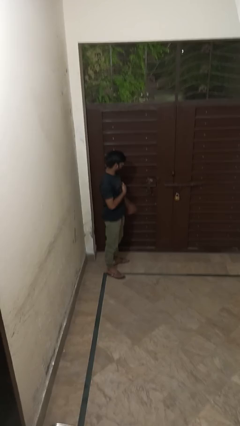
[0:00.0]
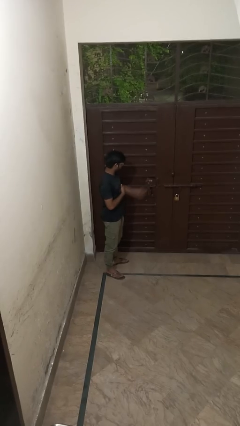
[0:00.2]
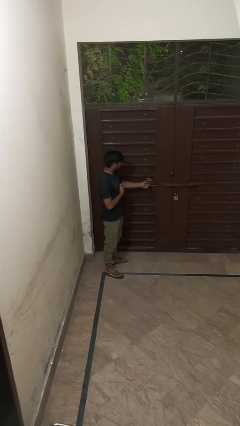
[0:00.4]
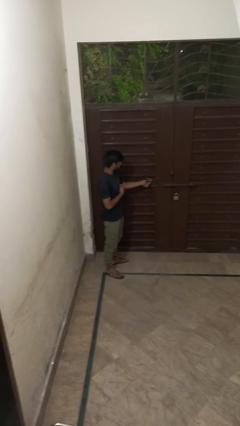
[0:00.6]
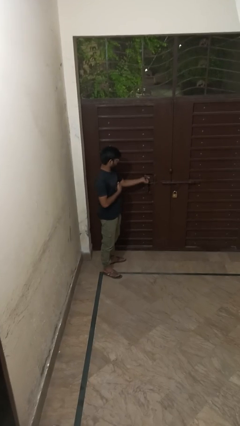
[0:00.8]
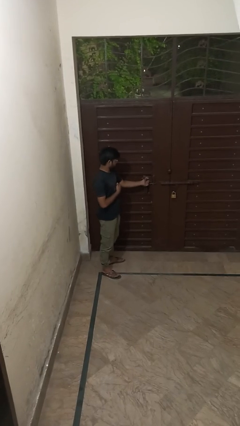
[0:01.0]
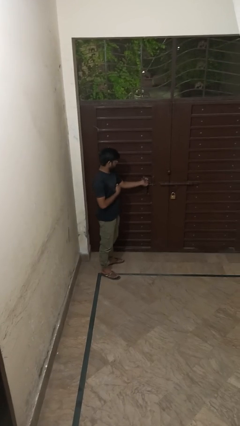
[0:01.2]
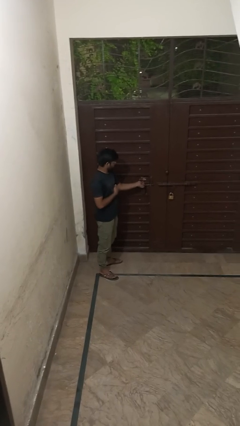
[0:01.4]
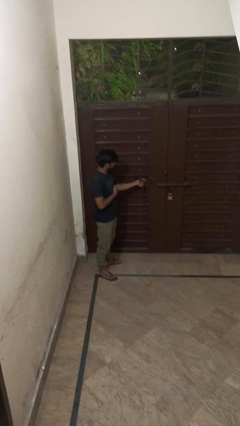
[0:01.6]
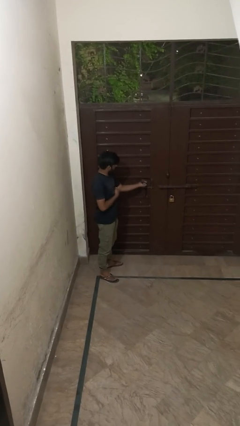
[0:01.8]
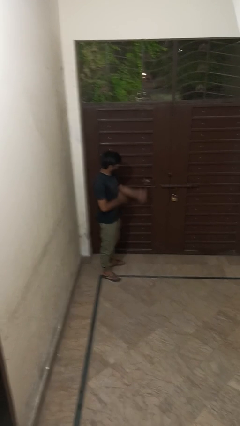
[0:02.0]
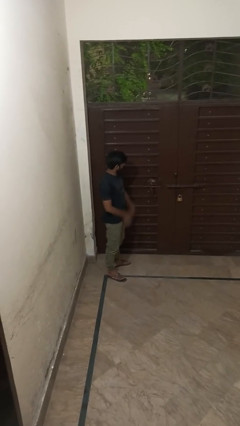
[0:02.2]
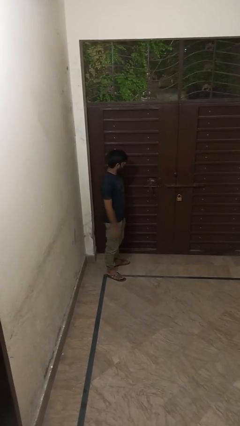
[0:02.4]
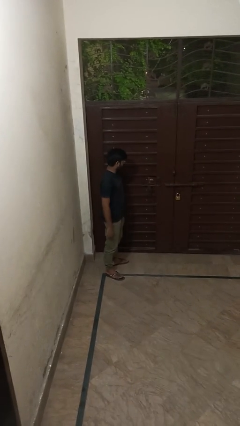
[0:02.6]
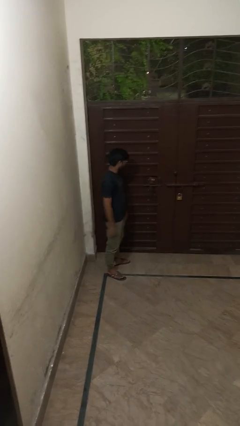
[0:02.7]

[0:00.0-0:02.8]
person unlocks door with keys

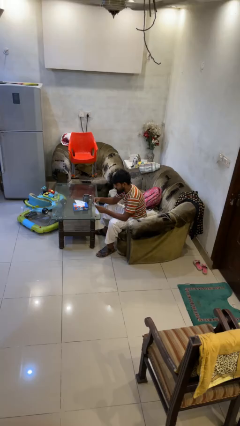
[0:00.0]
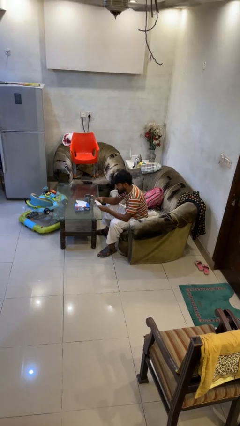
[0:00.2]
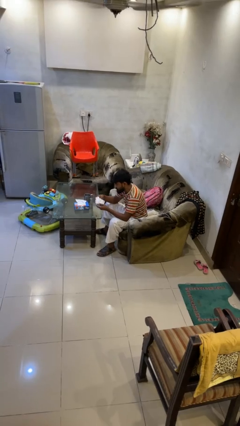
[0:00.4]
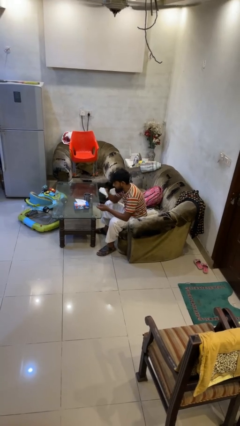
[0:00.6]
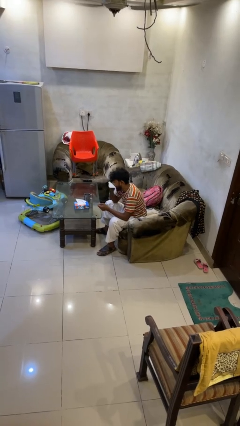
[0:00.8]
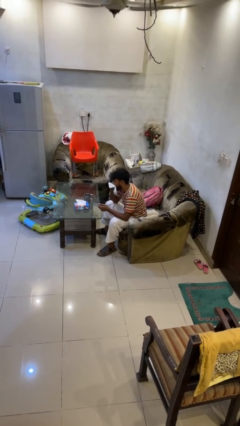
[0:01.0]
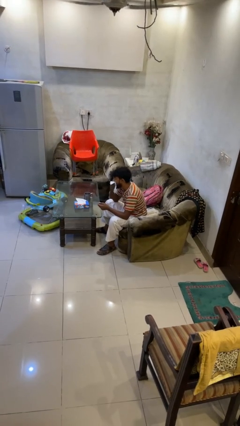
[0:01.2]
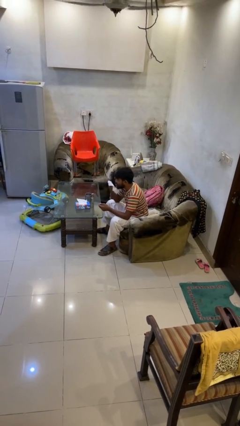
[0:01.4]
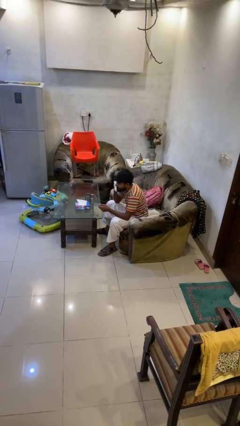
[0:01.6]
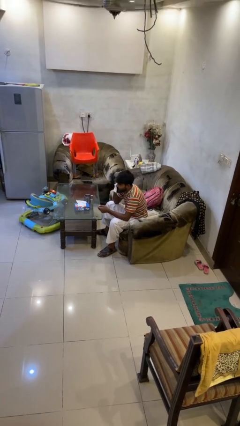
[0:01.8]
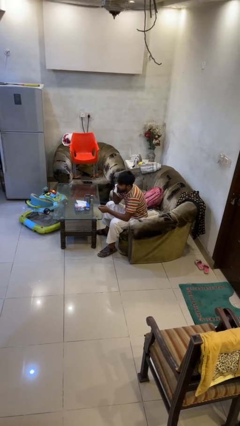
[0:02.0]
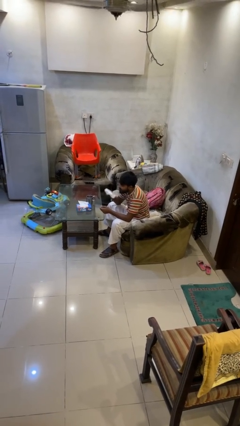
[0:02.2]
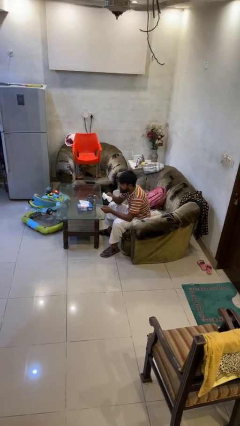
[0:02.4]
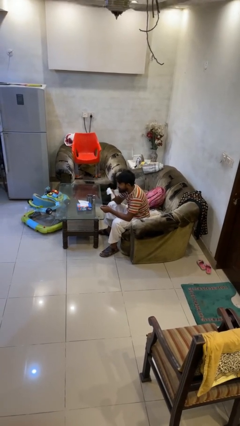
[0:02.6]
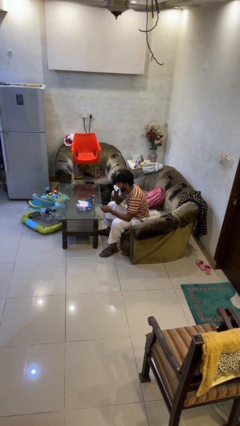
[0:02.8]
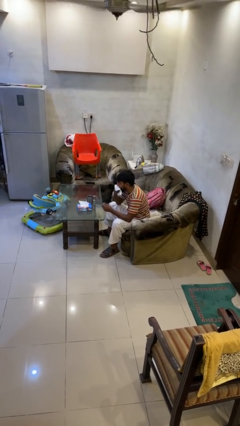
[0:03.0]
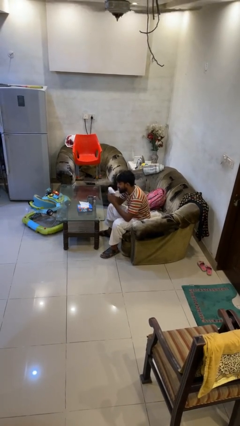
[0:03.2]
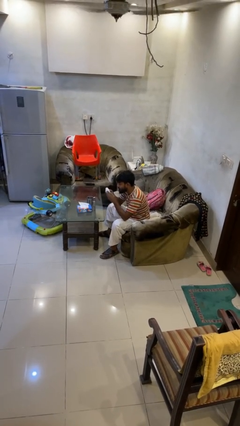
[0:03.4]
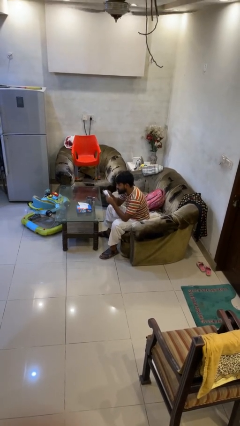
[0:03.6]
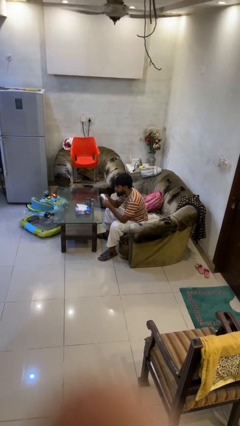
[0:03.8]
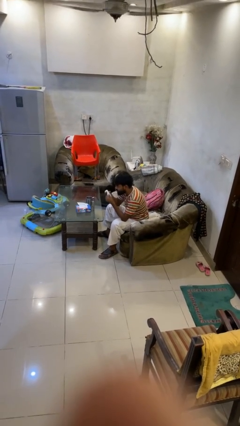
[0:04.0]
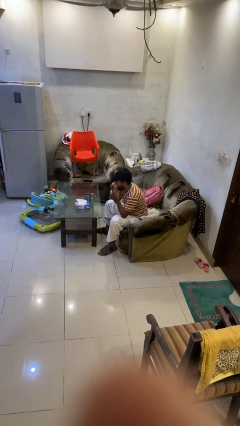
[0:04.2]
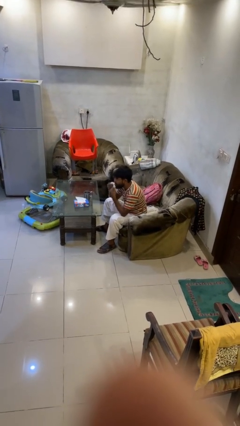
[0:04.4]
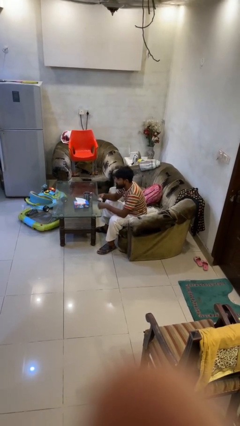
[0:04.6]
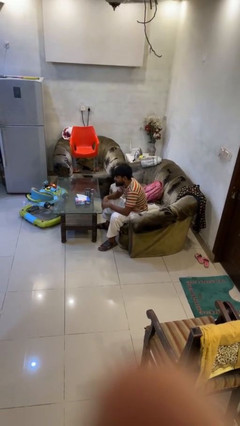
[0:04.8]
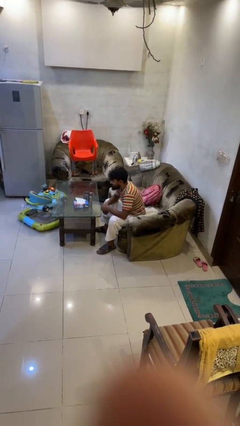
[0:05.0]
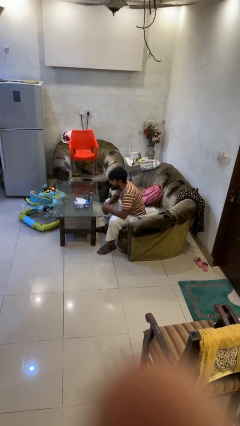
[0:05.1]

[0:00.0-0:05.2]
person wipes mouth with napkin

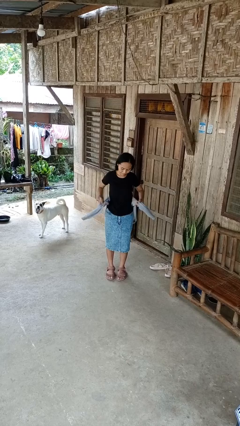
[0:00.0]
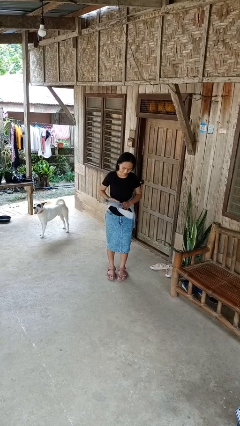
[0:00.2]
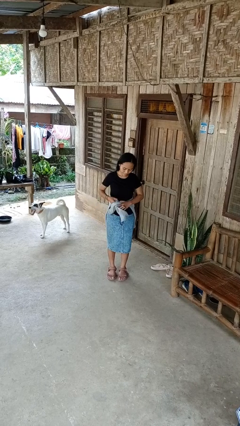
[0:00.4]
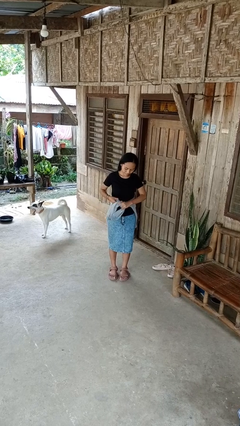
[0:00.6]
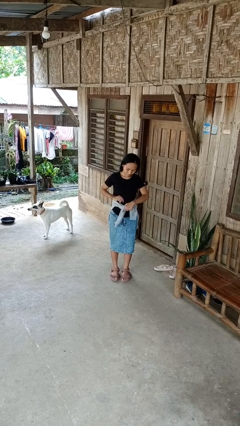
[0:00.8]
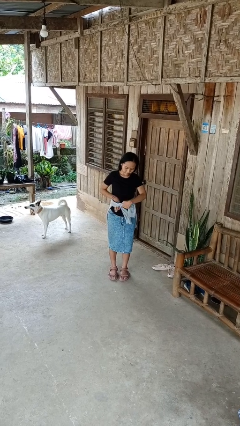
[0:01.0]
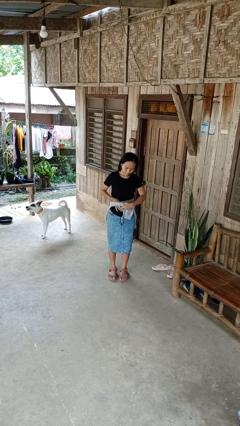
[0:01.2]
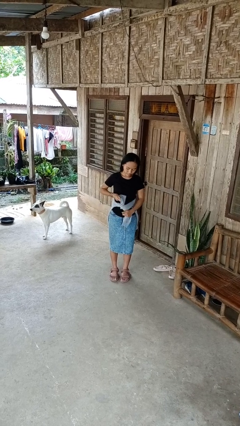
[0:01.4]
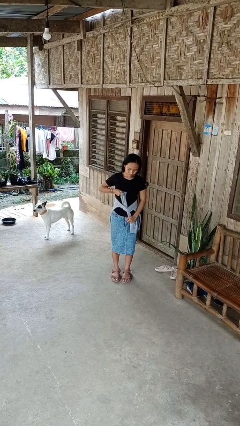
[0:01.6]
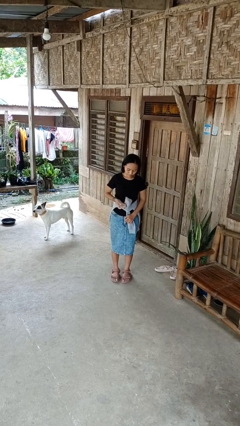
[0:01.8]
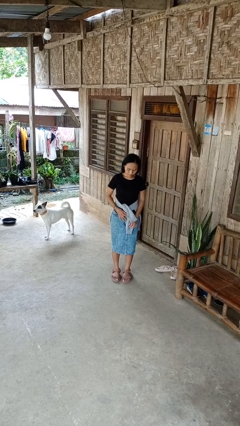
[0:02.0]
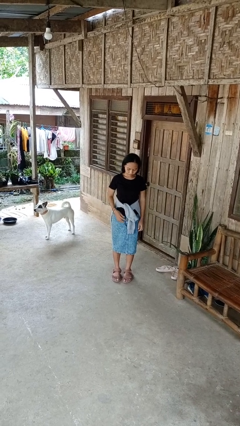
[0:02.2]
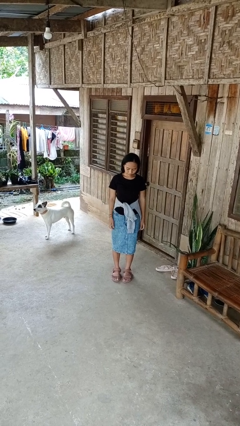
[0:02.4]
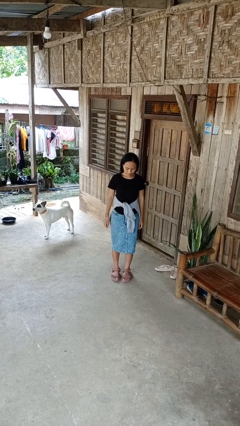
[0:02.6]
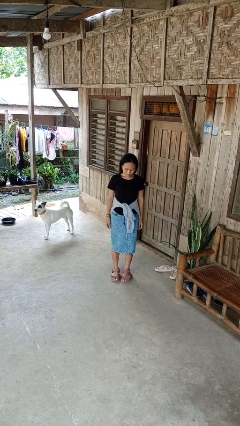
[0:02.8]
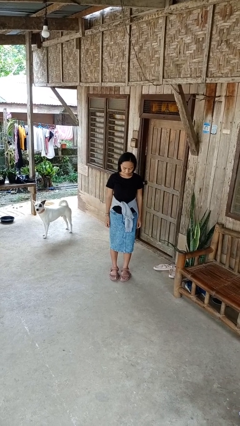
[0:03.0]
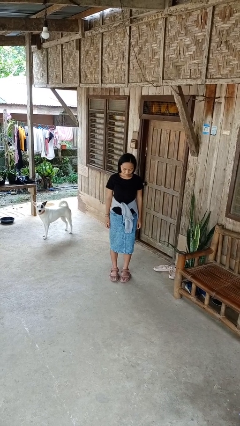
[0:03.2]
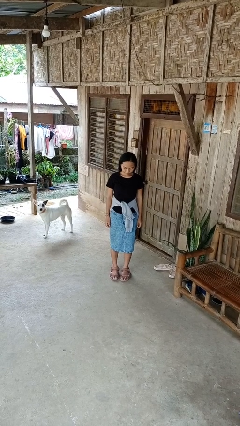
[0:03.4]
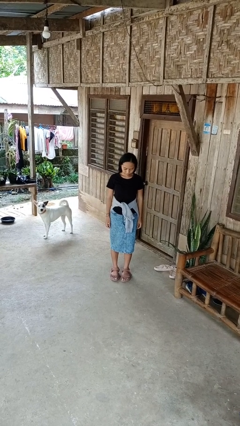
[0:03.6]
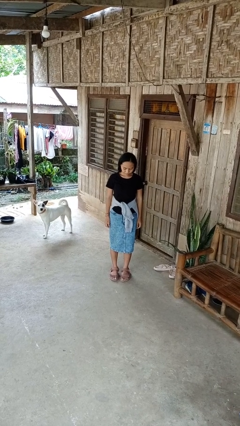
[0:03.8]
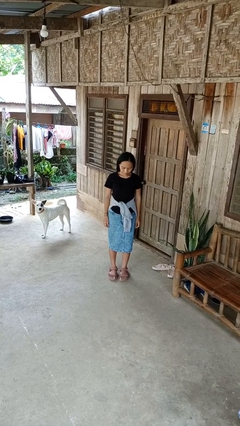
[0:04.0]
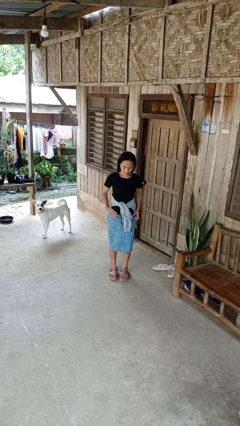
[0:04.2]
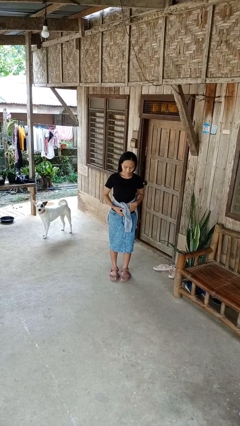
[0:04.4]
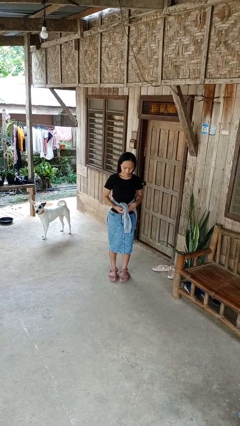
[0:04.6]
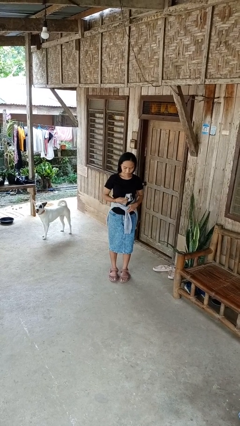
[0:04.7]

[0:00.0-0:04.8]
person ties jacket around waist

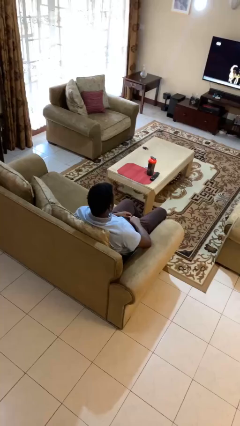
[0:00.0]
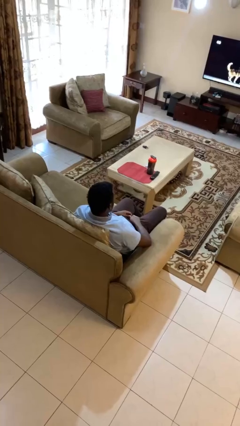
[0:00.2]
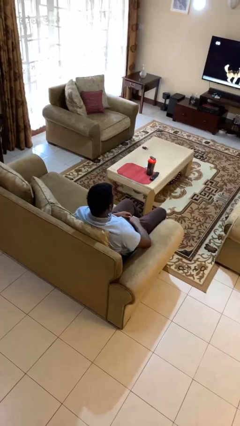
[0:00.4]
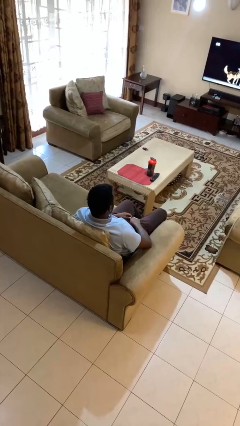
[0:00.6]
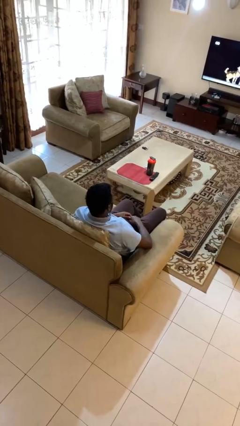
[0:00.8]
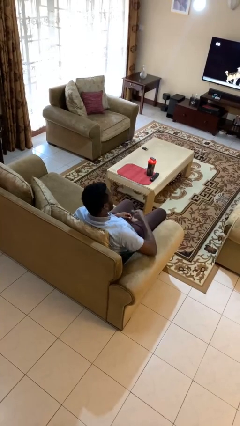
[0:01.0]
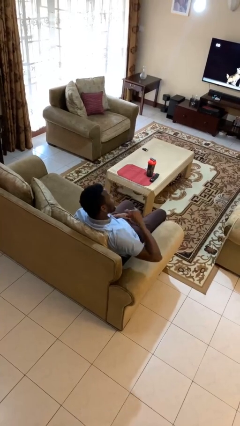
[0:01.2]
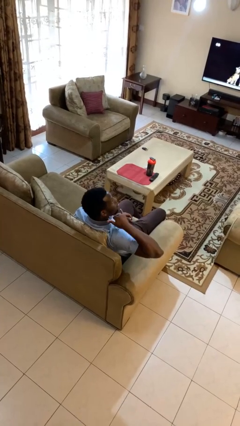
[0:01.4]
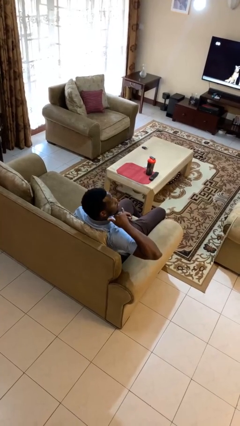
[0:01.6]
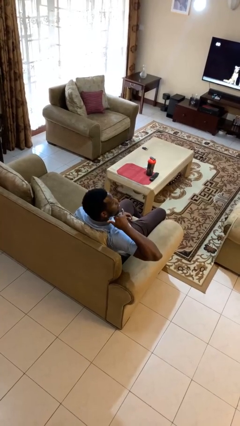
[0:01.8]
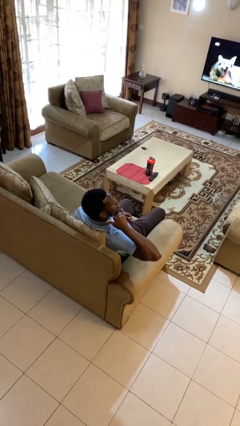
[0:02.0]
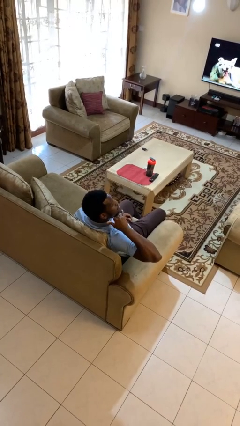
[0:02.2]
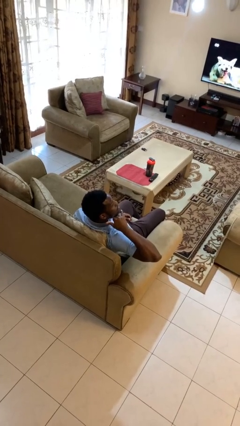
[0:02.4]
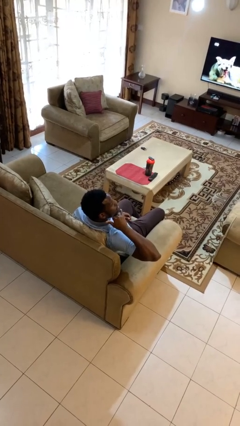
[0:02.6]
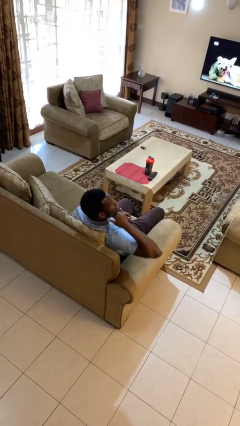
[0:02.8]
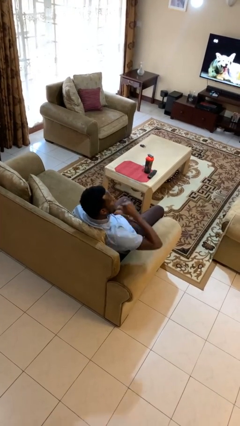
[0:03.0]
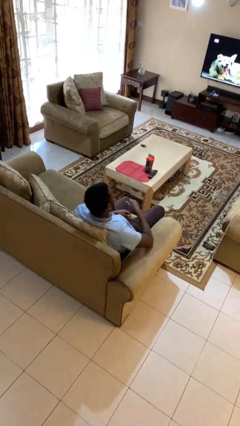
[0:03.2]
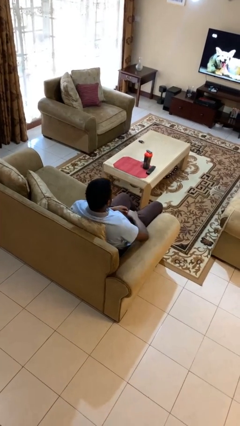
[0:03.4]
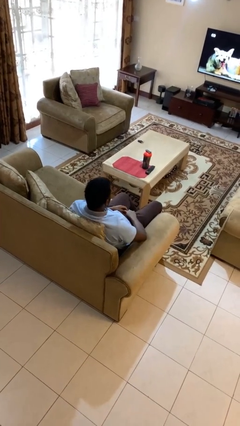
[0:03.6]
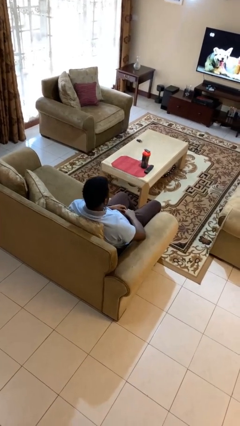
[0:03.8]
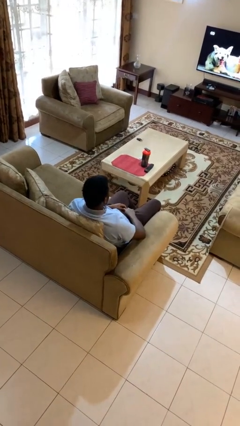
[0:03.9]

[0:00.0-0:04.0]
person gestures call me

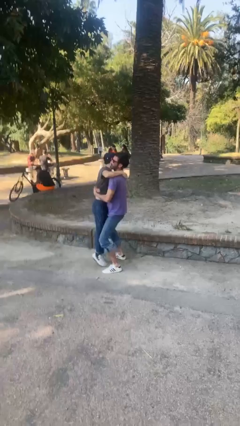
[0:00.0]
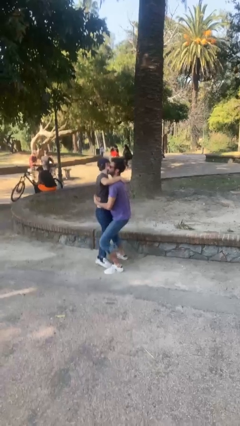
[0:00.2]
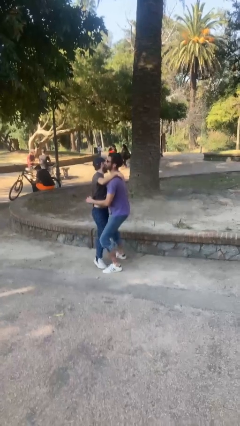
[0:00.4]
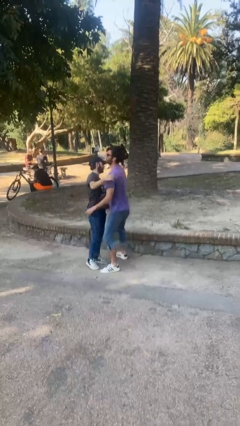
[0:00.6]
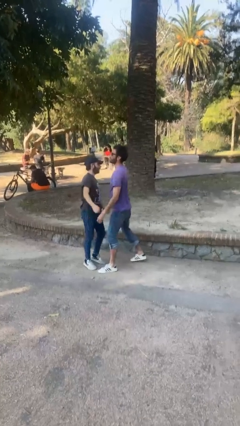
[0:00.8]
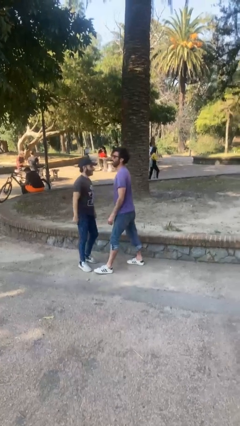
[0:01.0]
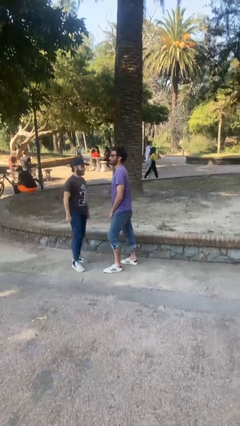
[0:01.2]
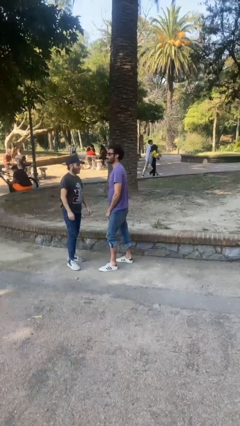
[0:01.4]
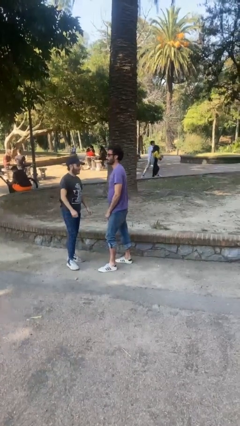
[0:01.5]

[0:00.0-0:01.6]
person puts down person
